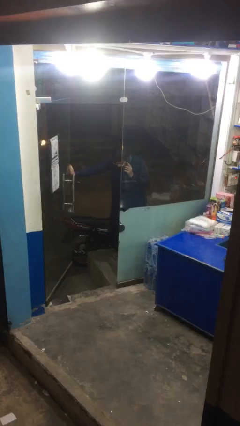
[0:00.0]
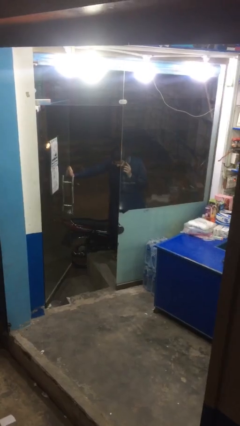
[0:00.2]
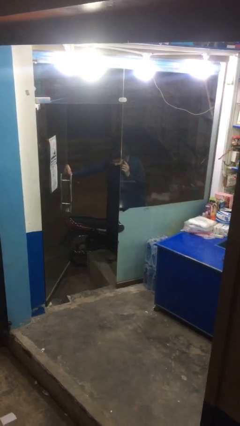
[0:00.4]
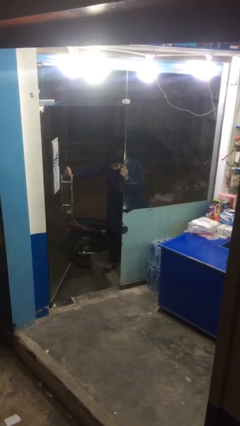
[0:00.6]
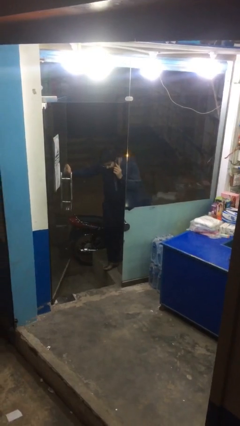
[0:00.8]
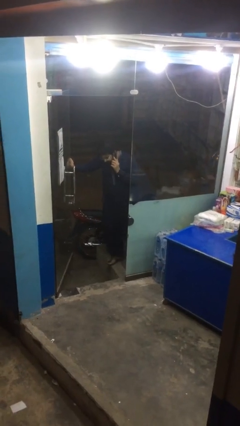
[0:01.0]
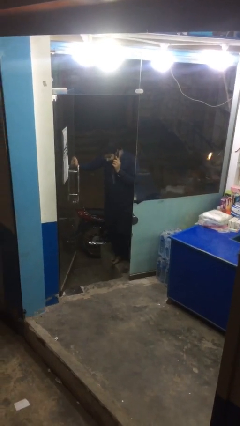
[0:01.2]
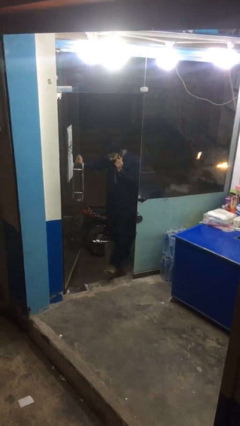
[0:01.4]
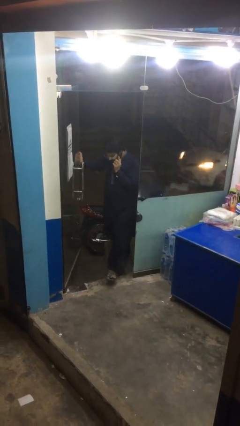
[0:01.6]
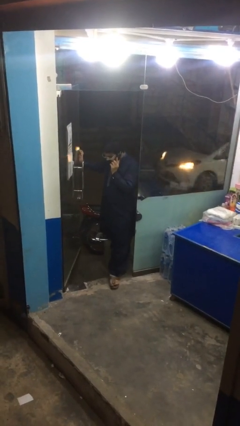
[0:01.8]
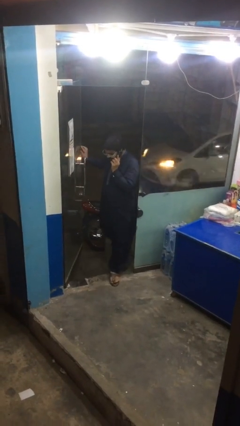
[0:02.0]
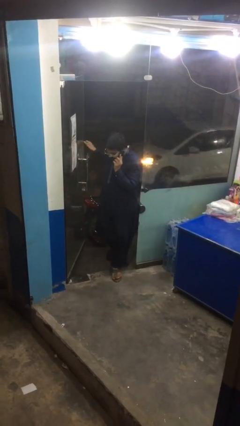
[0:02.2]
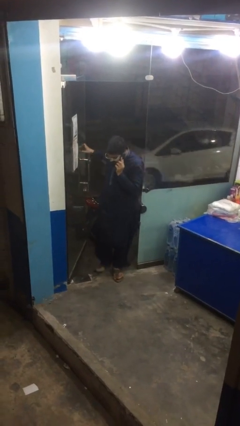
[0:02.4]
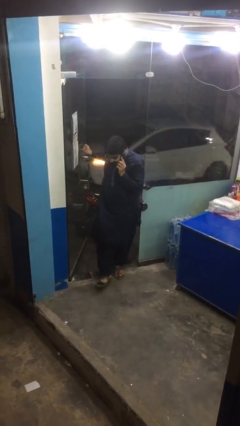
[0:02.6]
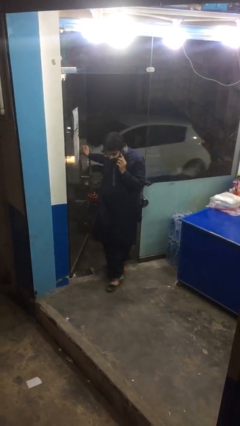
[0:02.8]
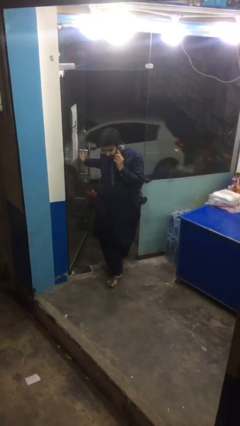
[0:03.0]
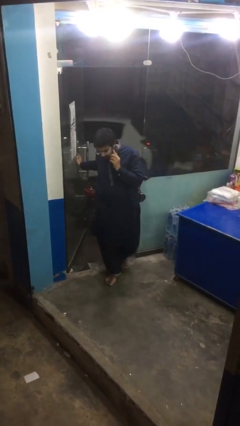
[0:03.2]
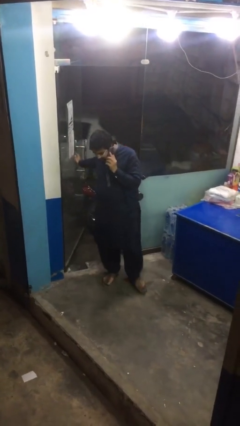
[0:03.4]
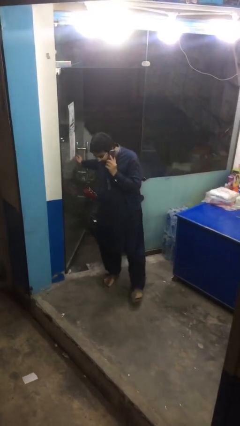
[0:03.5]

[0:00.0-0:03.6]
person enters scene through structure

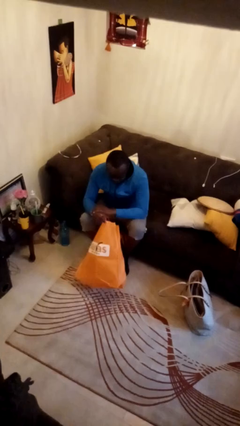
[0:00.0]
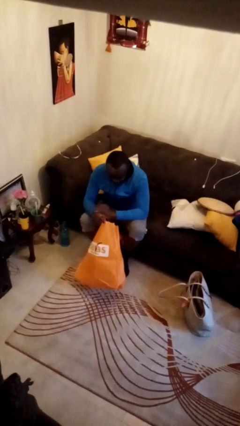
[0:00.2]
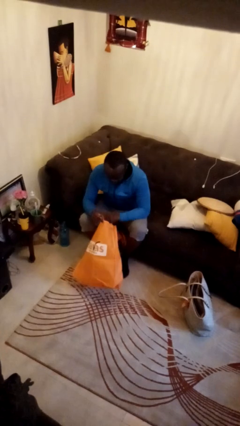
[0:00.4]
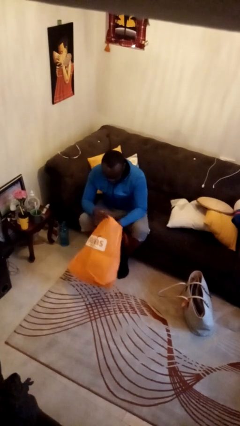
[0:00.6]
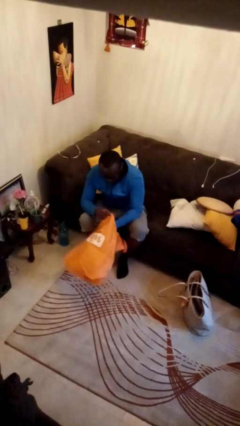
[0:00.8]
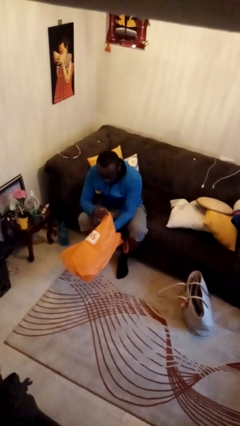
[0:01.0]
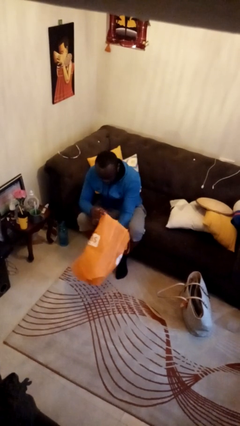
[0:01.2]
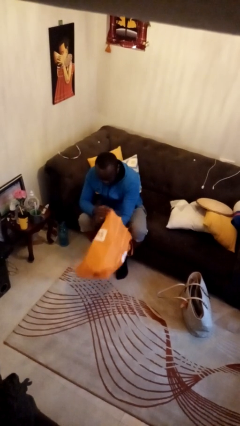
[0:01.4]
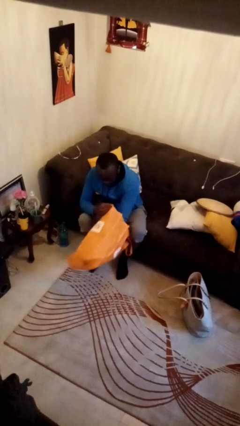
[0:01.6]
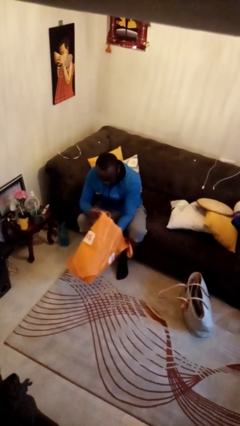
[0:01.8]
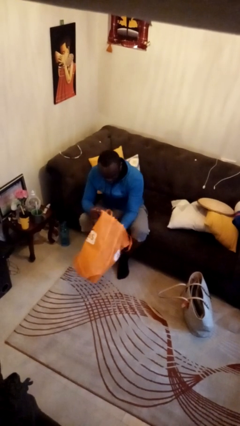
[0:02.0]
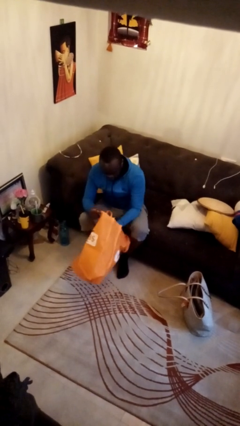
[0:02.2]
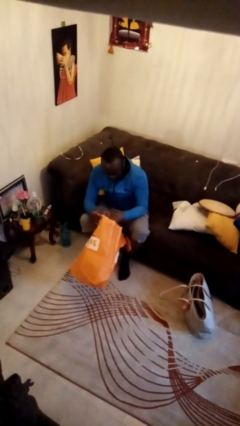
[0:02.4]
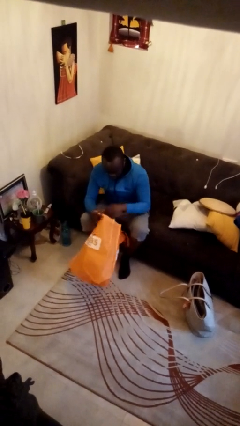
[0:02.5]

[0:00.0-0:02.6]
person searches in bag

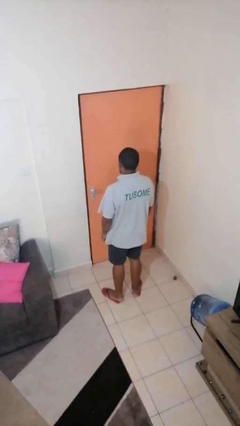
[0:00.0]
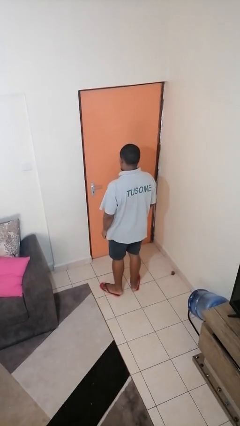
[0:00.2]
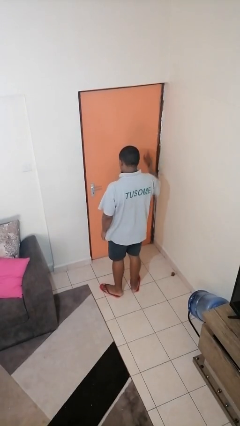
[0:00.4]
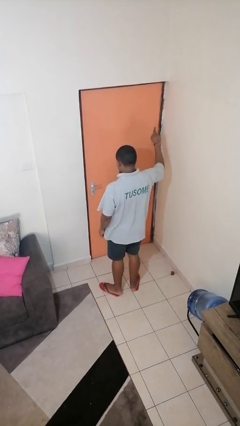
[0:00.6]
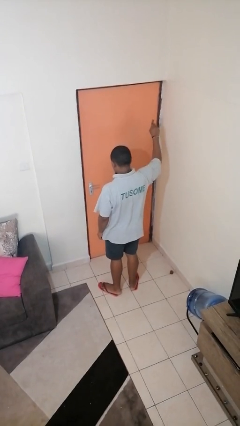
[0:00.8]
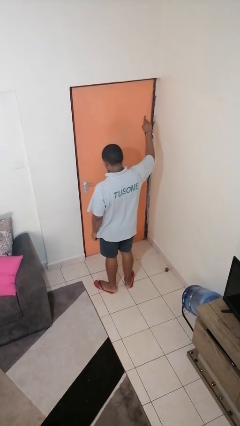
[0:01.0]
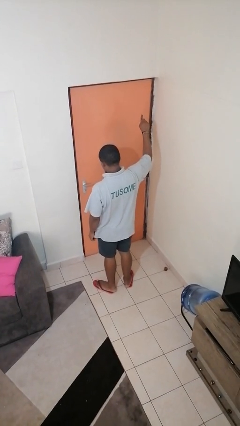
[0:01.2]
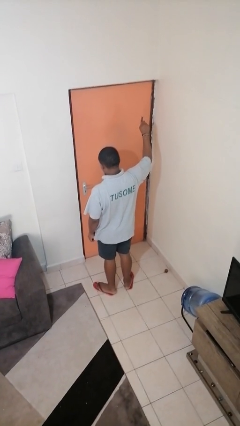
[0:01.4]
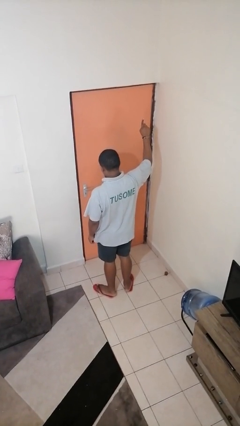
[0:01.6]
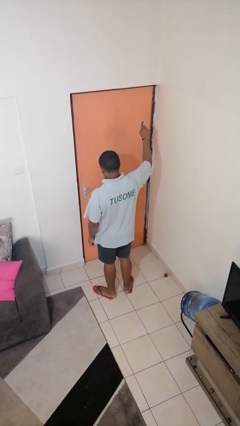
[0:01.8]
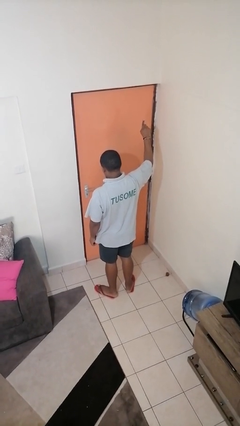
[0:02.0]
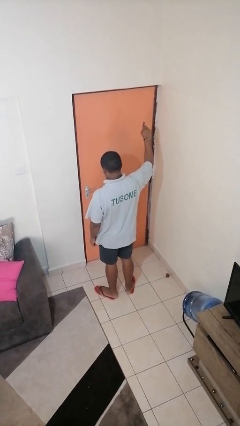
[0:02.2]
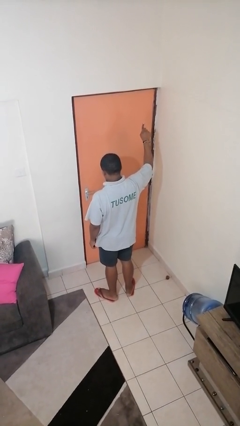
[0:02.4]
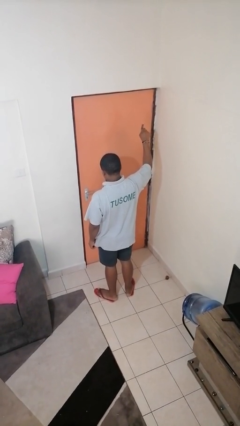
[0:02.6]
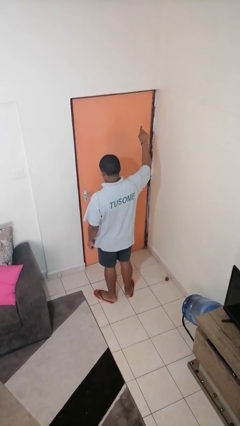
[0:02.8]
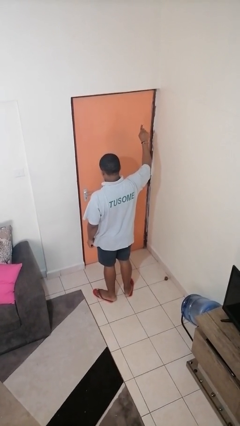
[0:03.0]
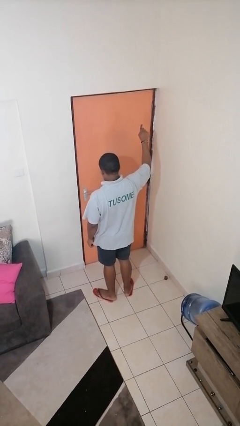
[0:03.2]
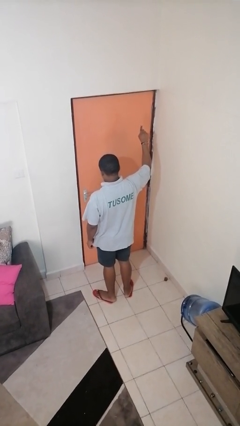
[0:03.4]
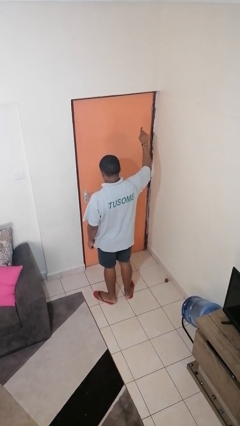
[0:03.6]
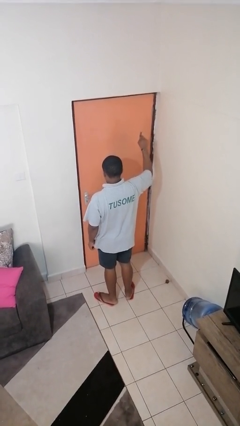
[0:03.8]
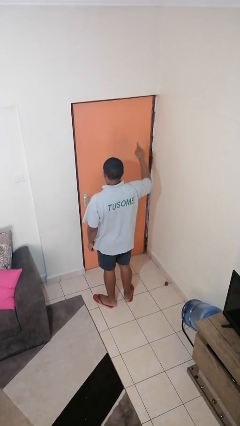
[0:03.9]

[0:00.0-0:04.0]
person gestures number one

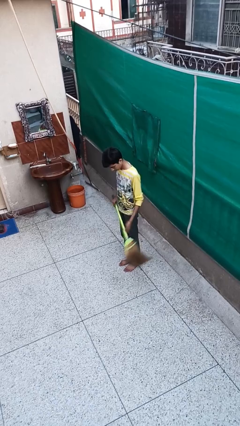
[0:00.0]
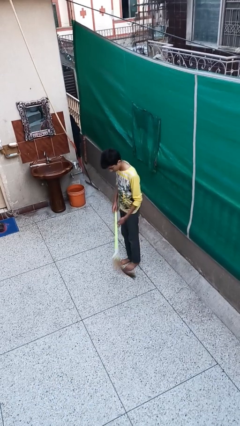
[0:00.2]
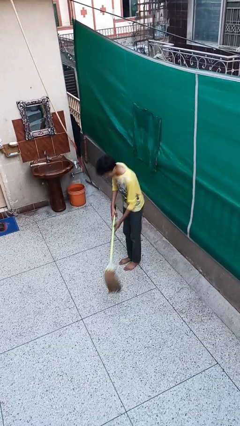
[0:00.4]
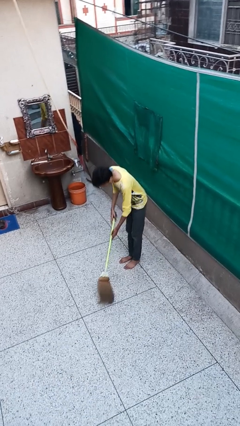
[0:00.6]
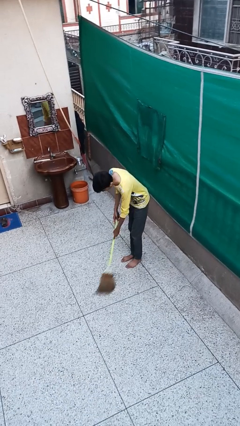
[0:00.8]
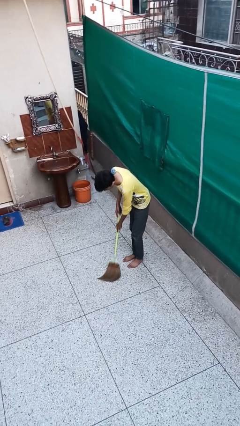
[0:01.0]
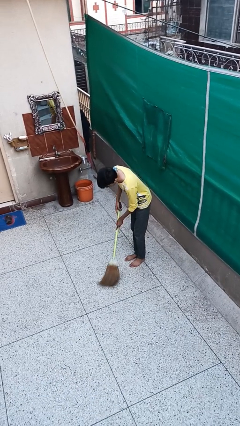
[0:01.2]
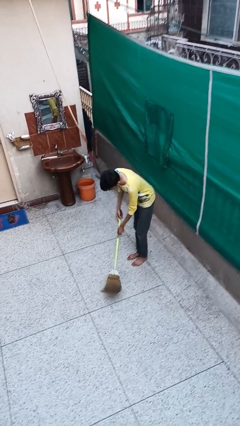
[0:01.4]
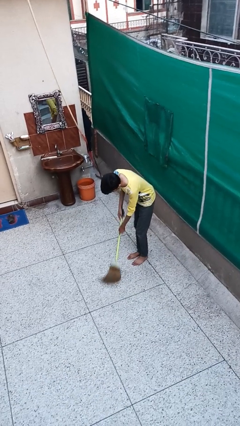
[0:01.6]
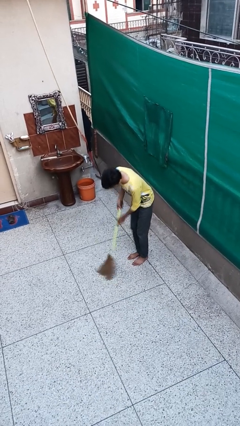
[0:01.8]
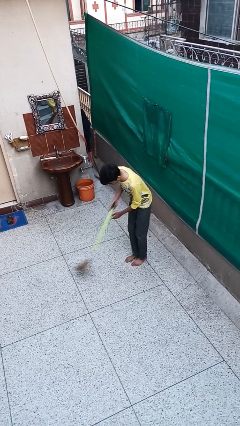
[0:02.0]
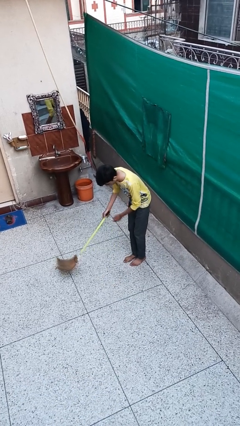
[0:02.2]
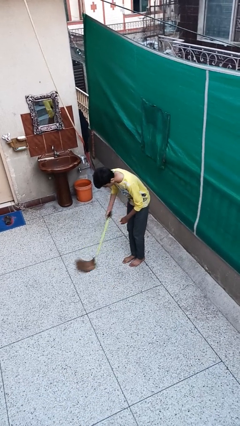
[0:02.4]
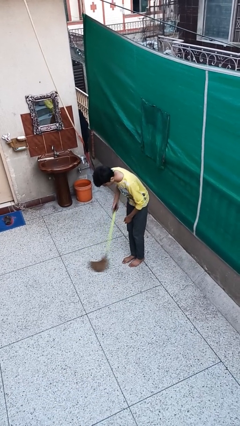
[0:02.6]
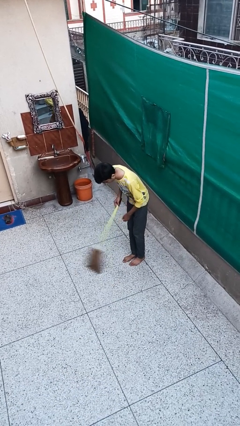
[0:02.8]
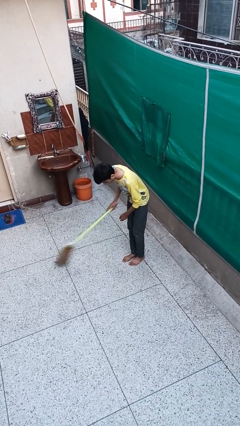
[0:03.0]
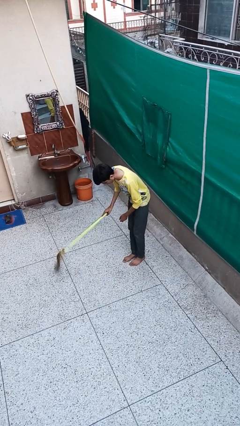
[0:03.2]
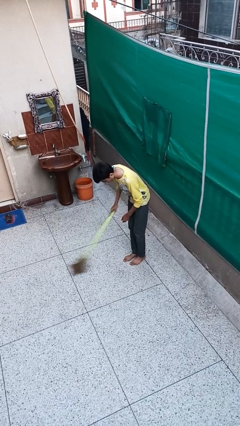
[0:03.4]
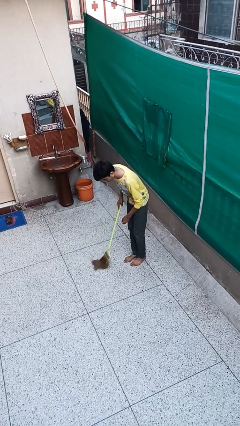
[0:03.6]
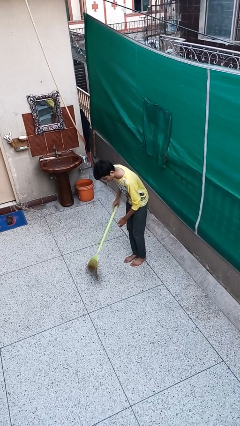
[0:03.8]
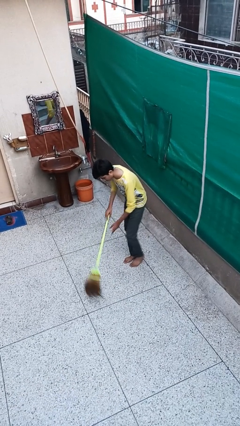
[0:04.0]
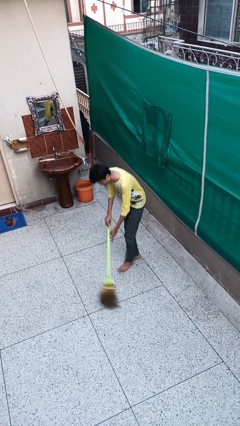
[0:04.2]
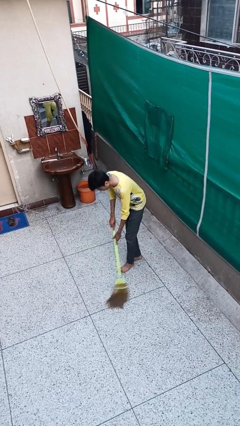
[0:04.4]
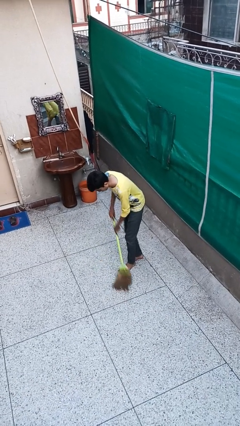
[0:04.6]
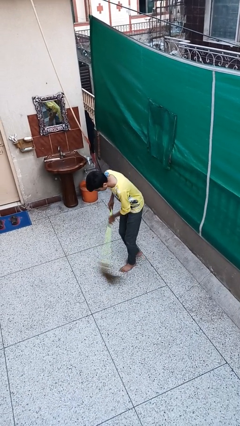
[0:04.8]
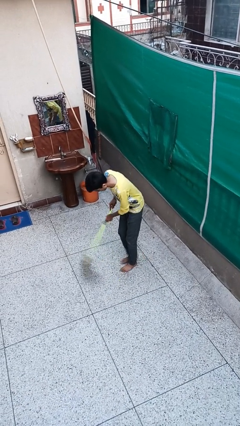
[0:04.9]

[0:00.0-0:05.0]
person sweeps floor

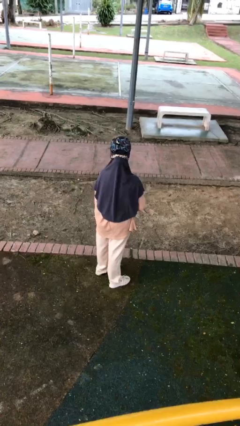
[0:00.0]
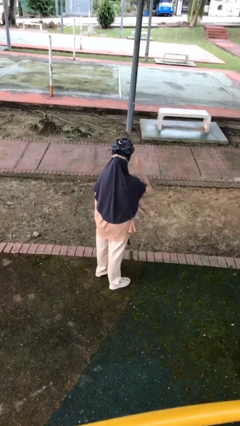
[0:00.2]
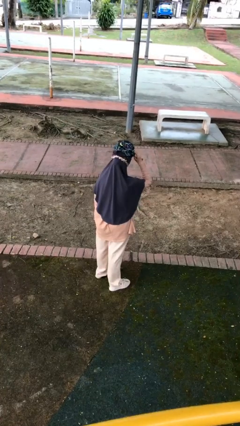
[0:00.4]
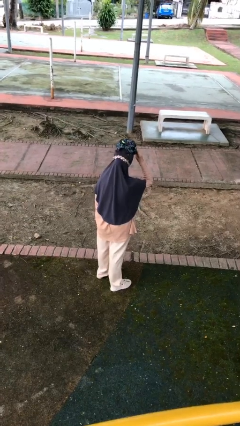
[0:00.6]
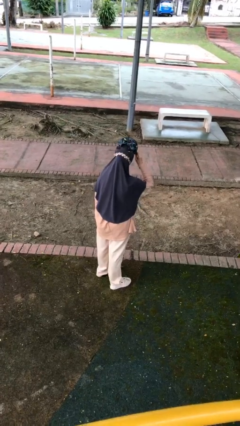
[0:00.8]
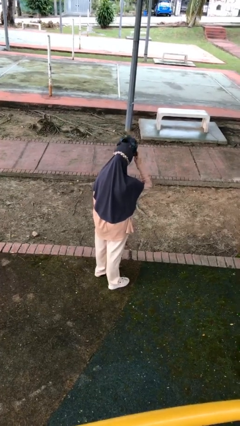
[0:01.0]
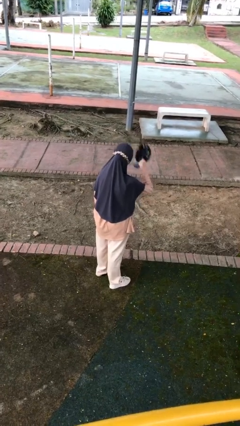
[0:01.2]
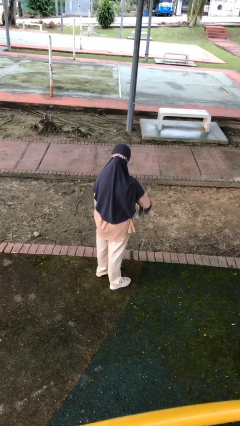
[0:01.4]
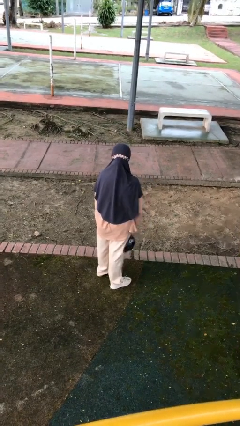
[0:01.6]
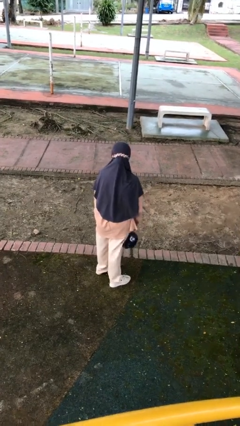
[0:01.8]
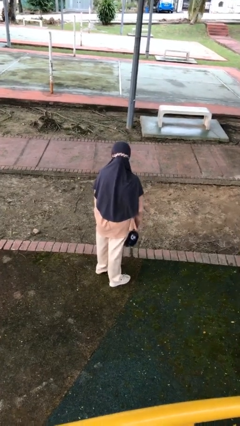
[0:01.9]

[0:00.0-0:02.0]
person takes off hat

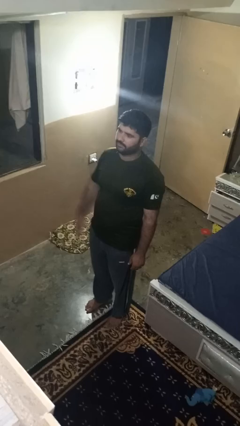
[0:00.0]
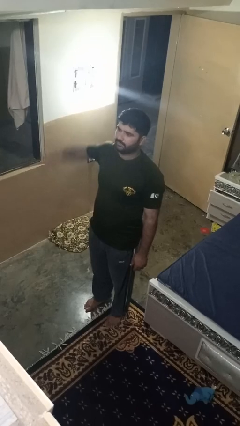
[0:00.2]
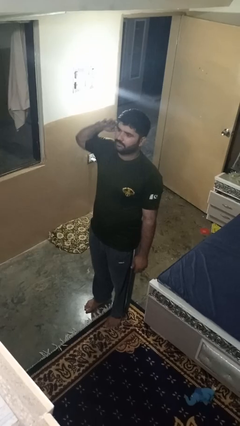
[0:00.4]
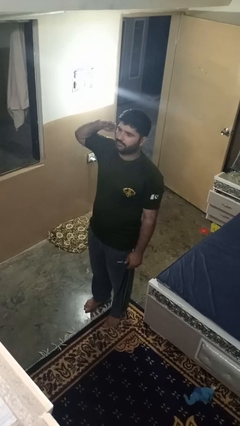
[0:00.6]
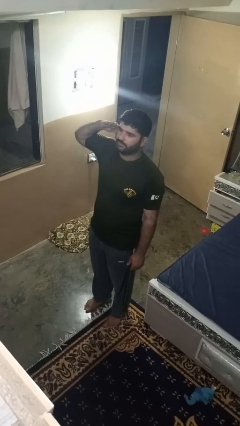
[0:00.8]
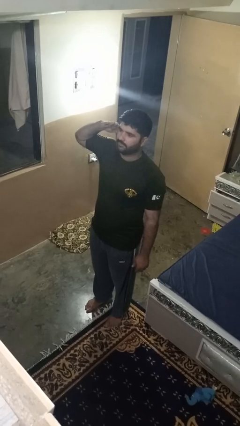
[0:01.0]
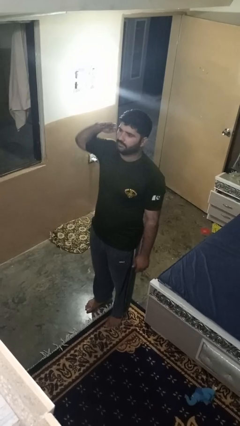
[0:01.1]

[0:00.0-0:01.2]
person salutes
